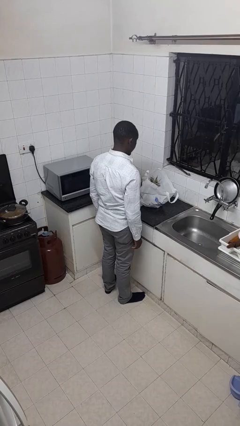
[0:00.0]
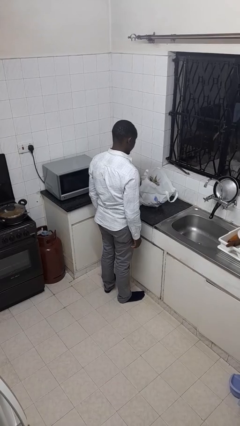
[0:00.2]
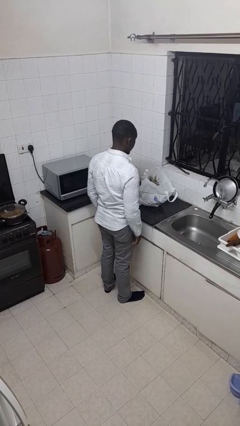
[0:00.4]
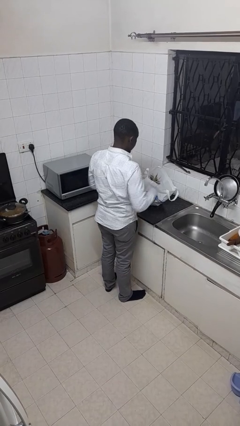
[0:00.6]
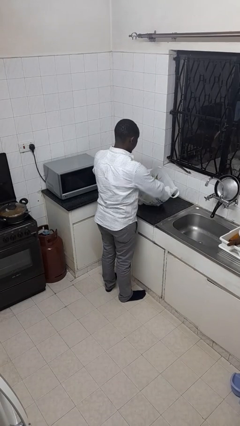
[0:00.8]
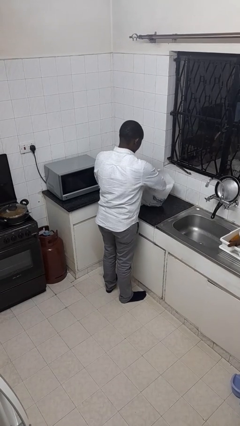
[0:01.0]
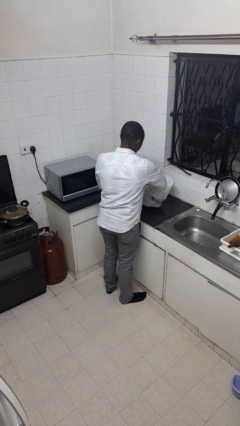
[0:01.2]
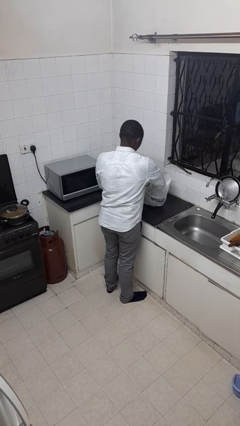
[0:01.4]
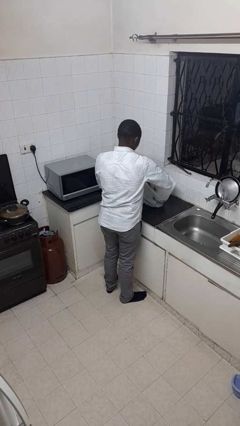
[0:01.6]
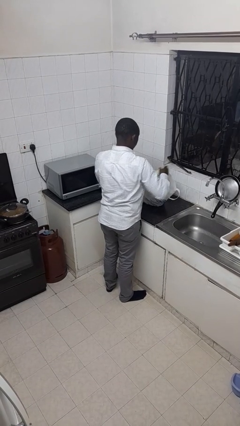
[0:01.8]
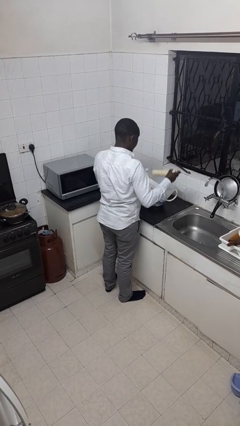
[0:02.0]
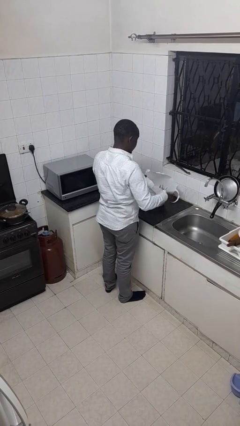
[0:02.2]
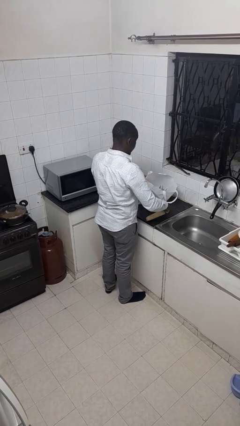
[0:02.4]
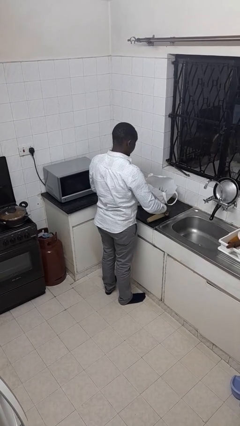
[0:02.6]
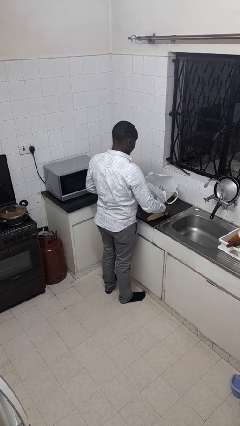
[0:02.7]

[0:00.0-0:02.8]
person takes object from bag

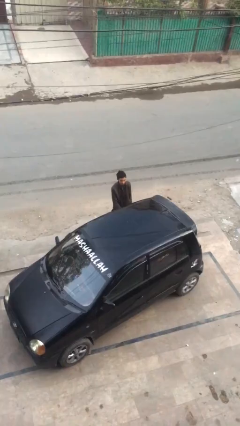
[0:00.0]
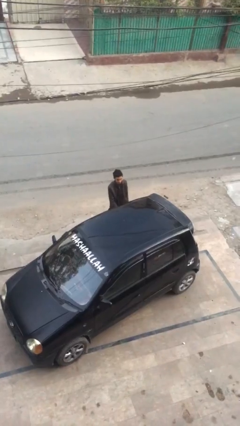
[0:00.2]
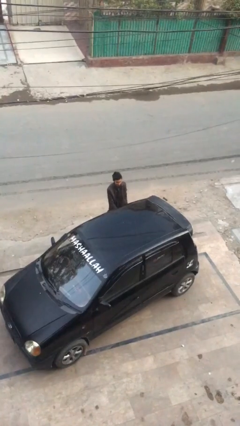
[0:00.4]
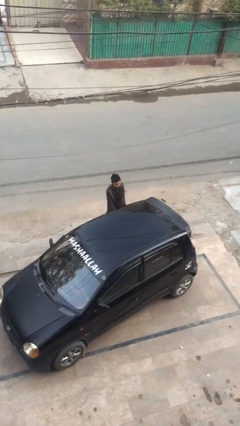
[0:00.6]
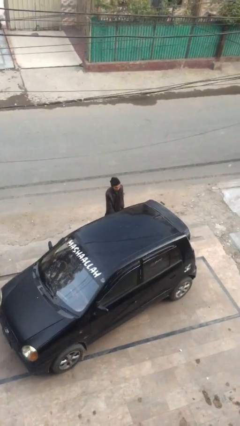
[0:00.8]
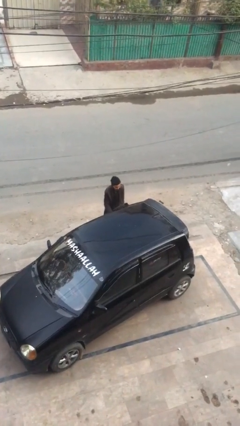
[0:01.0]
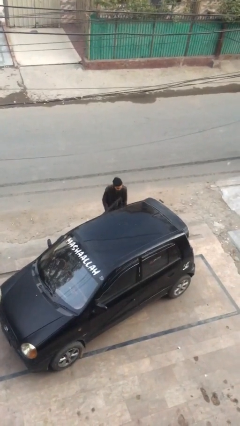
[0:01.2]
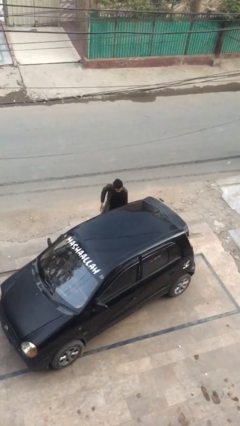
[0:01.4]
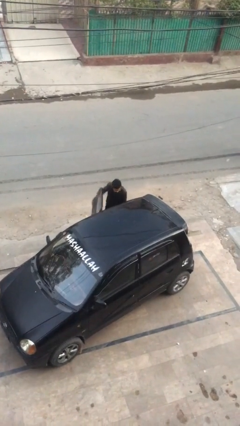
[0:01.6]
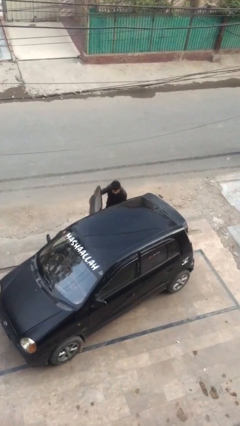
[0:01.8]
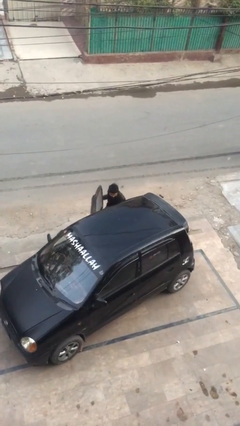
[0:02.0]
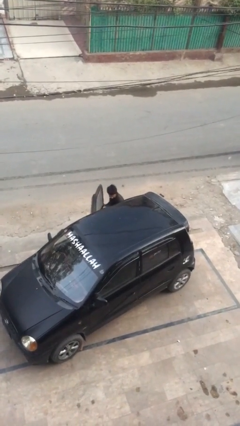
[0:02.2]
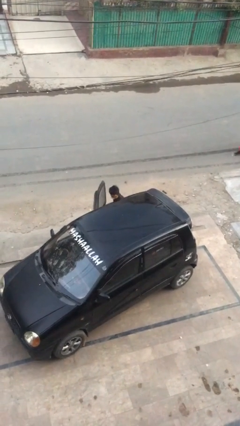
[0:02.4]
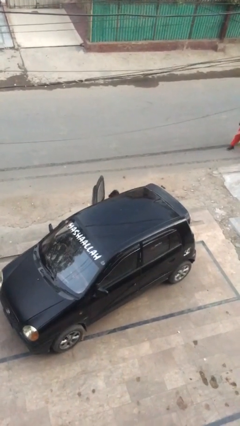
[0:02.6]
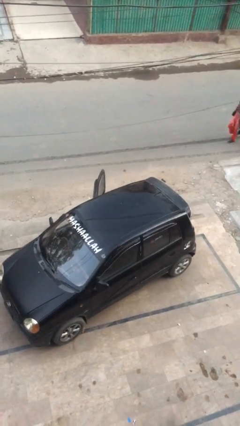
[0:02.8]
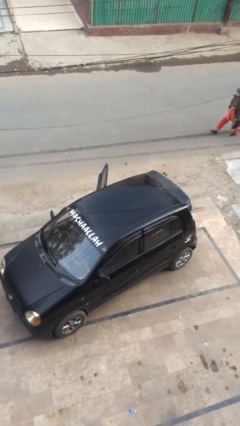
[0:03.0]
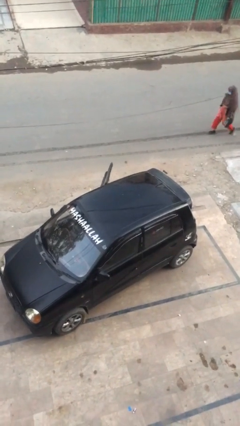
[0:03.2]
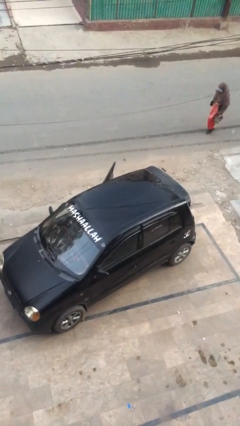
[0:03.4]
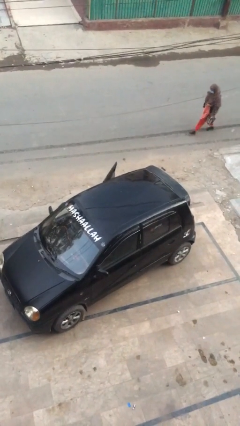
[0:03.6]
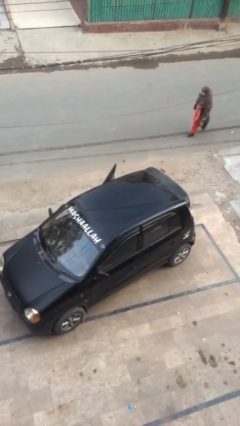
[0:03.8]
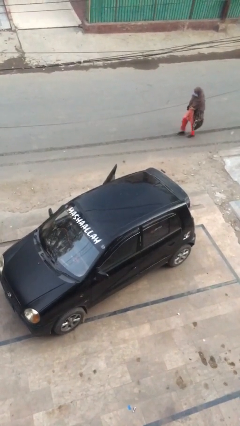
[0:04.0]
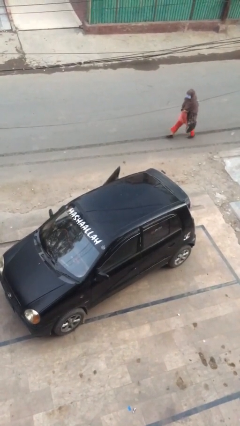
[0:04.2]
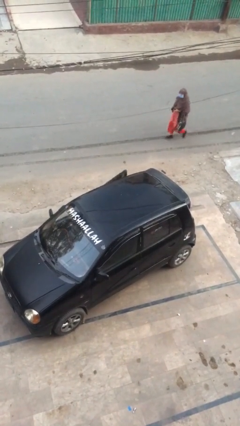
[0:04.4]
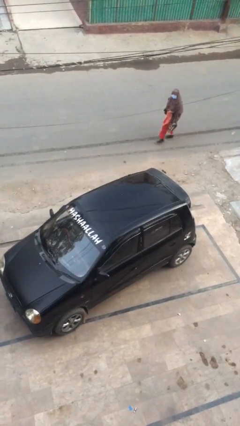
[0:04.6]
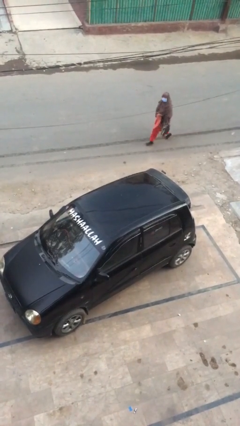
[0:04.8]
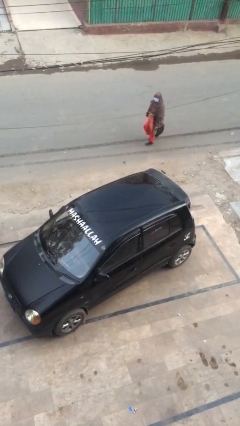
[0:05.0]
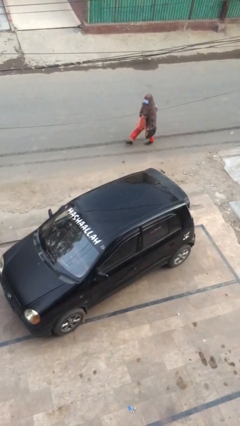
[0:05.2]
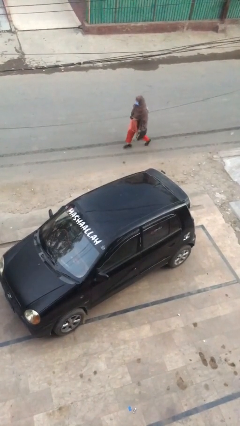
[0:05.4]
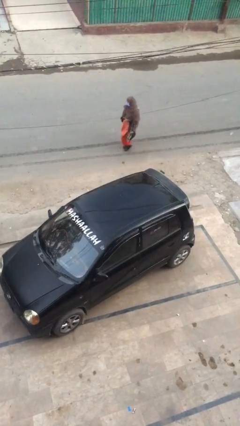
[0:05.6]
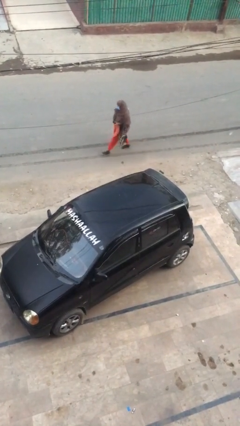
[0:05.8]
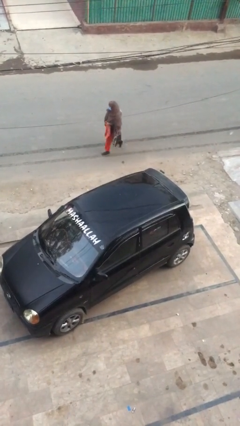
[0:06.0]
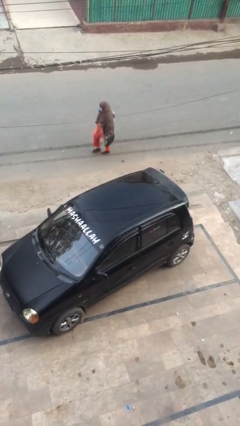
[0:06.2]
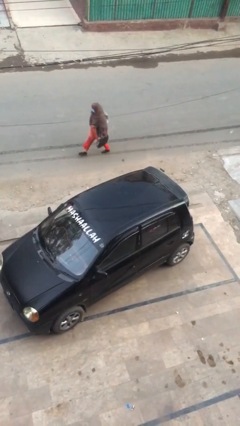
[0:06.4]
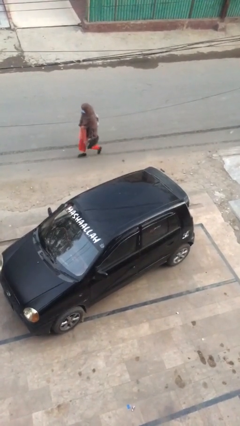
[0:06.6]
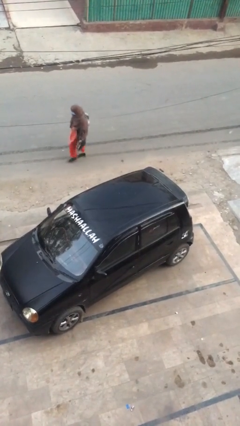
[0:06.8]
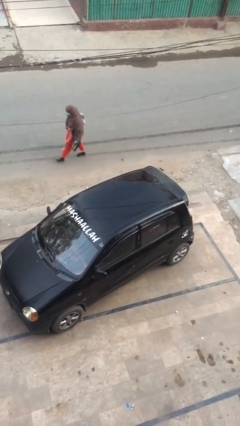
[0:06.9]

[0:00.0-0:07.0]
person enters car

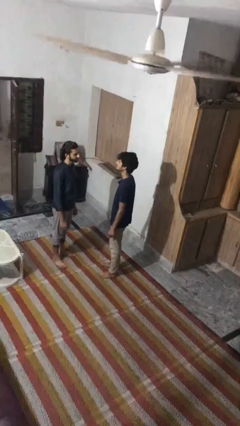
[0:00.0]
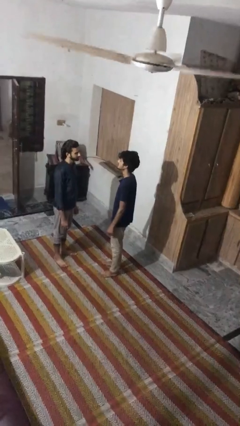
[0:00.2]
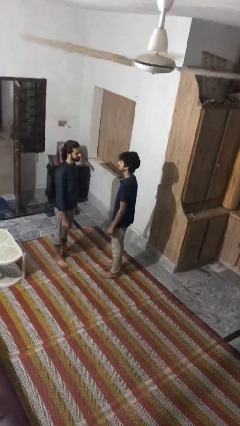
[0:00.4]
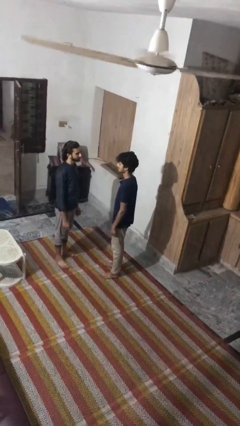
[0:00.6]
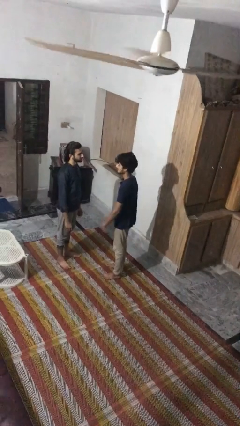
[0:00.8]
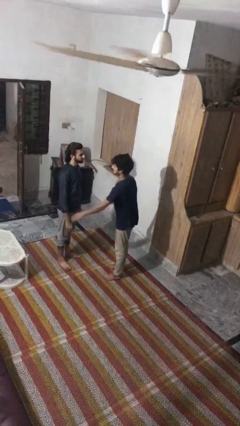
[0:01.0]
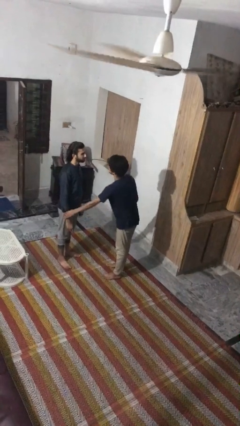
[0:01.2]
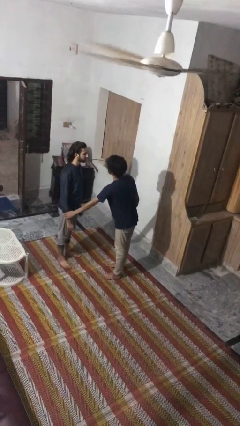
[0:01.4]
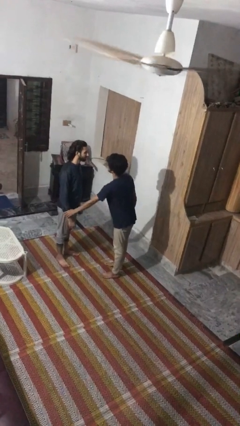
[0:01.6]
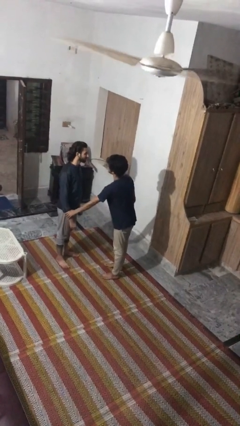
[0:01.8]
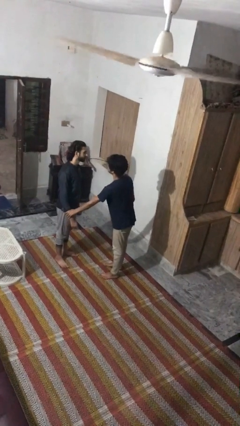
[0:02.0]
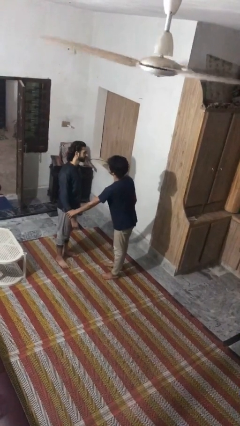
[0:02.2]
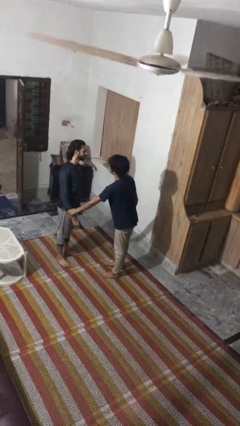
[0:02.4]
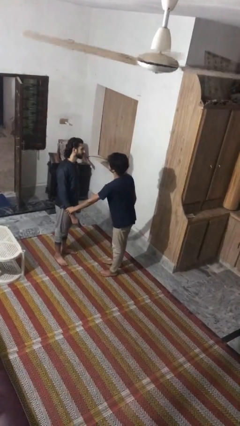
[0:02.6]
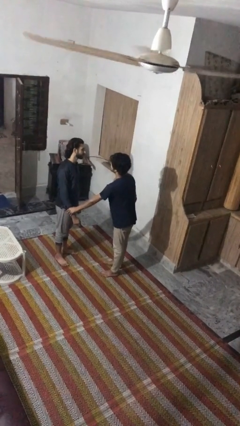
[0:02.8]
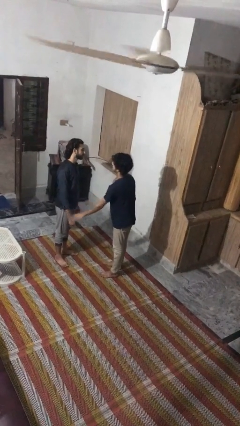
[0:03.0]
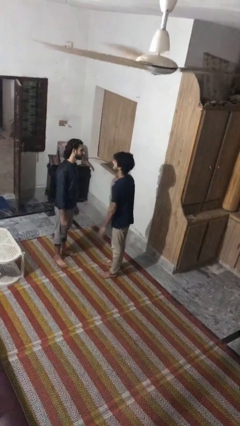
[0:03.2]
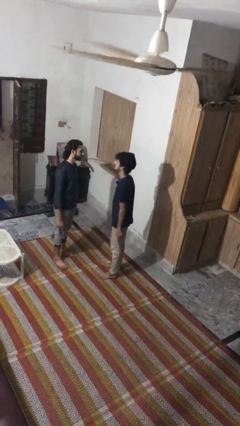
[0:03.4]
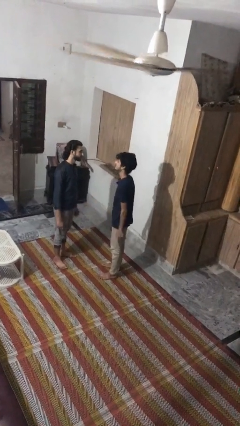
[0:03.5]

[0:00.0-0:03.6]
person grabs person by forearm

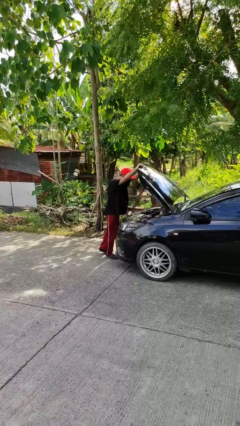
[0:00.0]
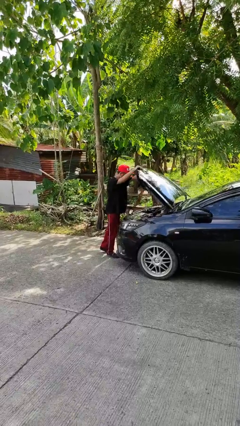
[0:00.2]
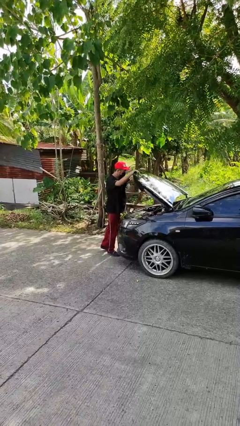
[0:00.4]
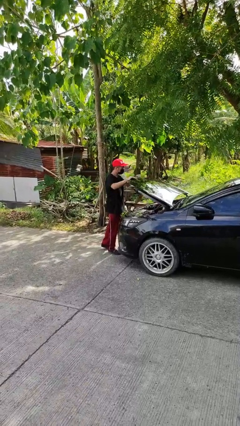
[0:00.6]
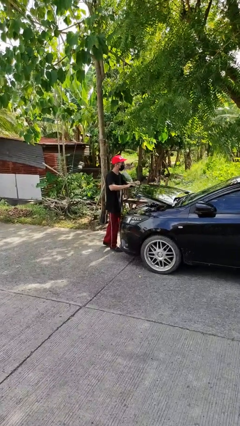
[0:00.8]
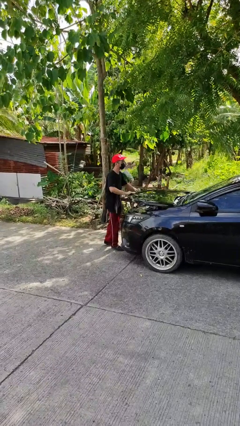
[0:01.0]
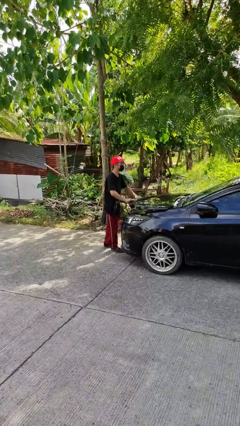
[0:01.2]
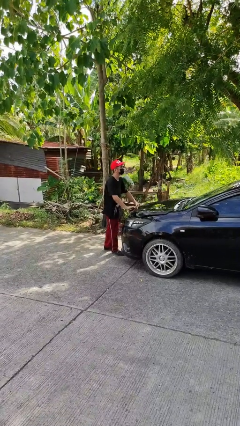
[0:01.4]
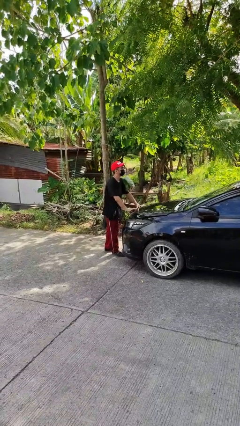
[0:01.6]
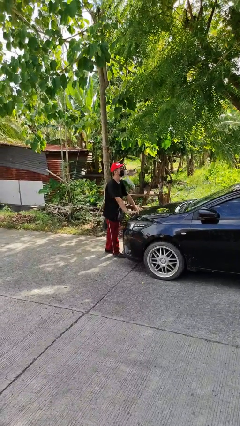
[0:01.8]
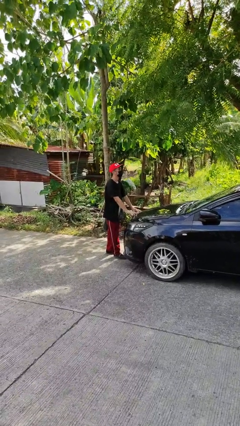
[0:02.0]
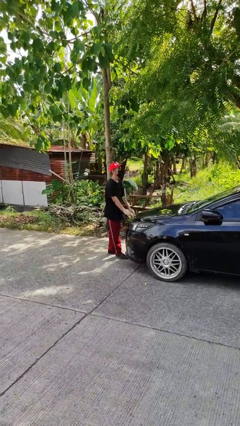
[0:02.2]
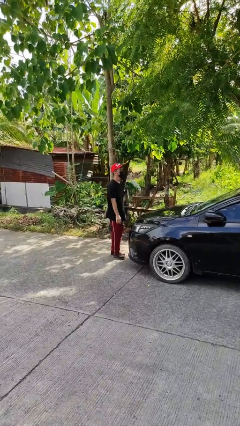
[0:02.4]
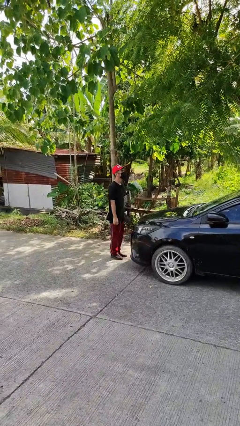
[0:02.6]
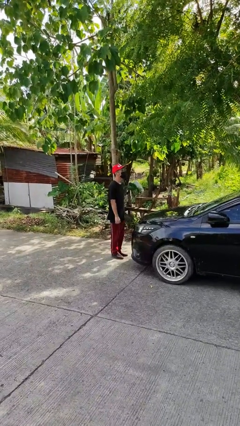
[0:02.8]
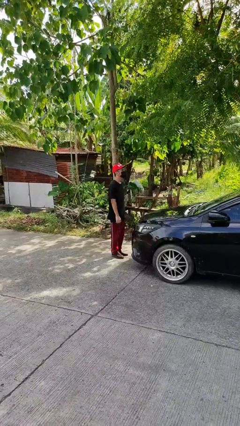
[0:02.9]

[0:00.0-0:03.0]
person closes car hood

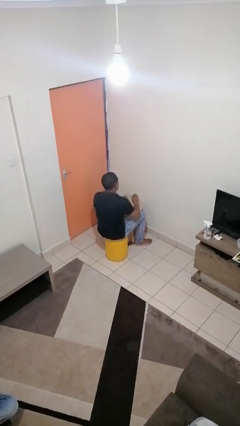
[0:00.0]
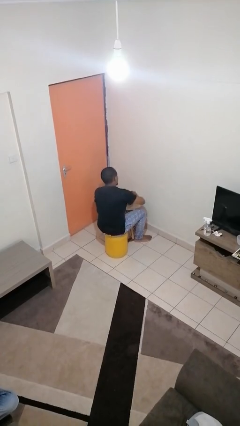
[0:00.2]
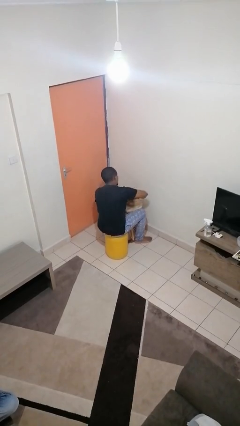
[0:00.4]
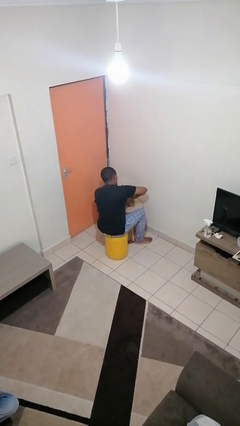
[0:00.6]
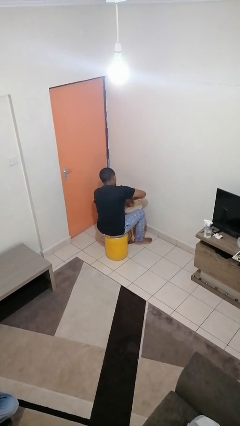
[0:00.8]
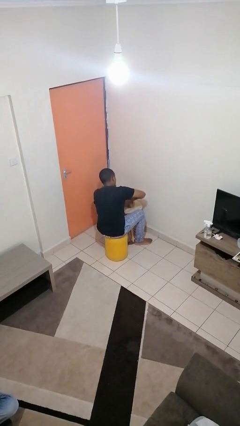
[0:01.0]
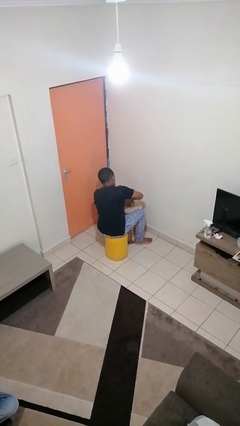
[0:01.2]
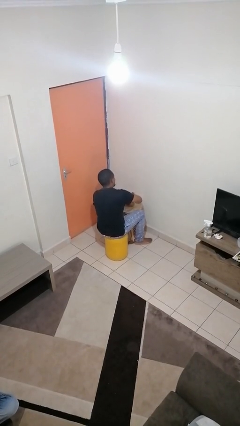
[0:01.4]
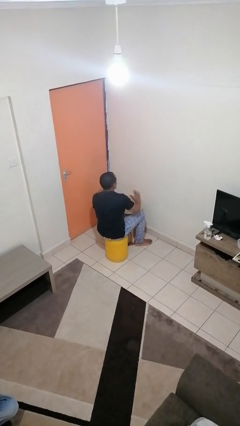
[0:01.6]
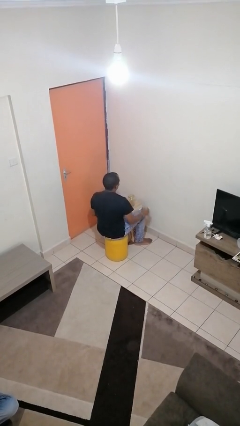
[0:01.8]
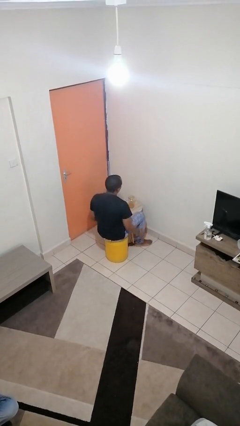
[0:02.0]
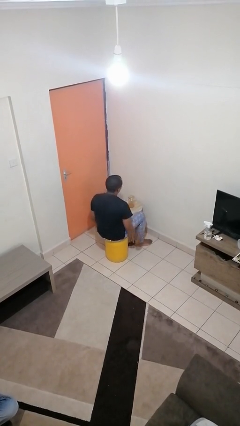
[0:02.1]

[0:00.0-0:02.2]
person closes jar
